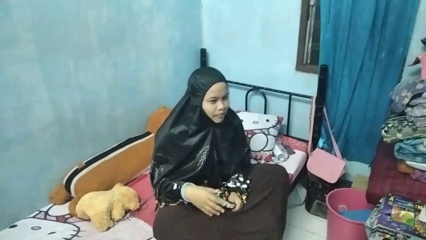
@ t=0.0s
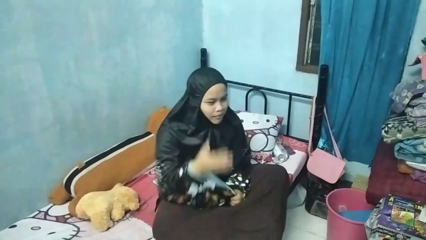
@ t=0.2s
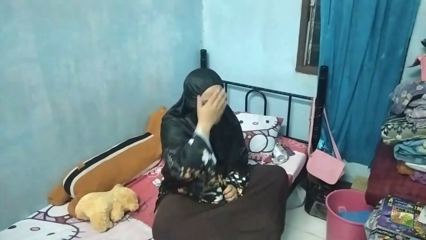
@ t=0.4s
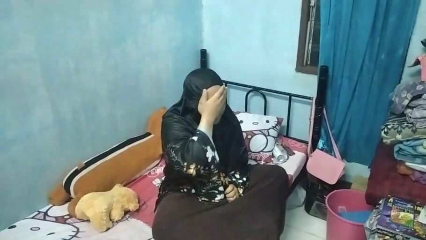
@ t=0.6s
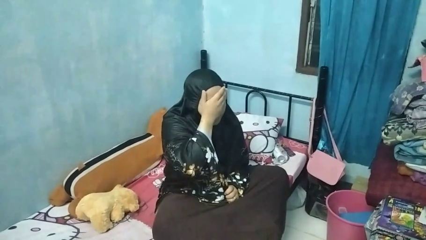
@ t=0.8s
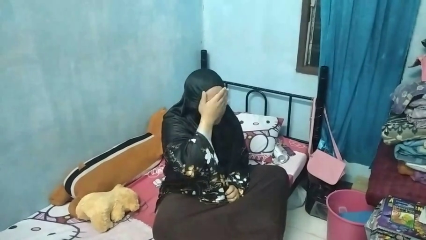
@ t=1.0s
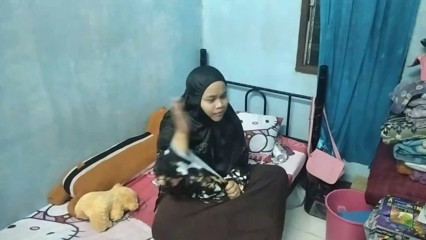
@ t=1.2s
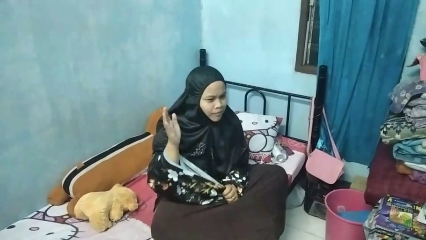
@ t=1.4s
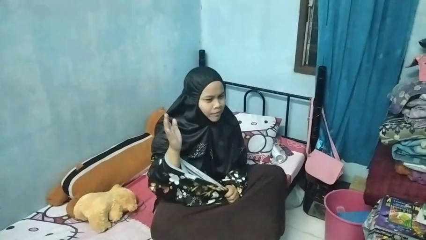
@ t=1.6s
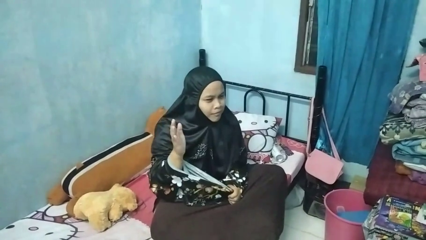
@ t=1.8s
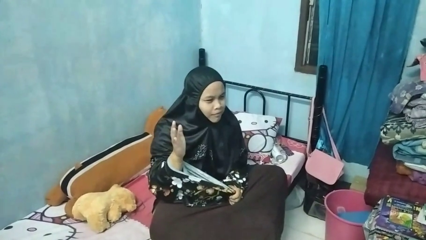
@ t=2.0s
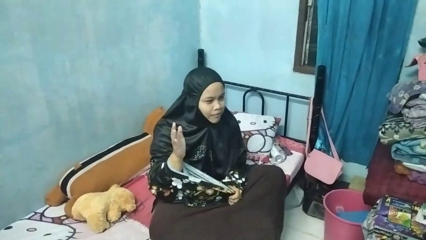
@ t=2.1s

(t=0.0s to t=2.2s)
person covers face with hands

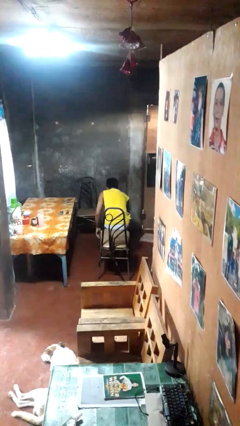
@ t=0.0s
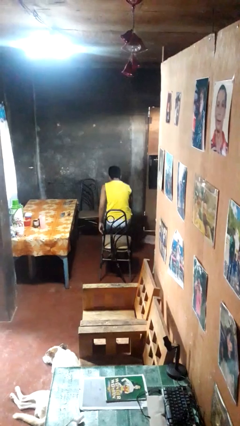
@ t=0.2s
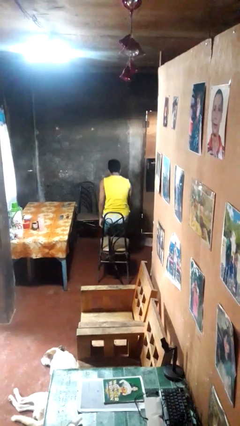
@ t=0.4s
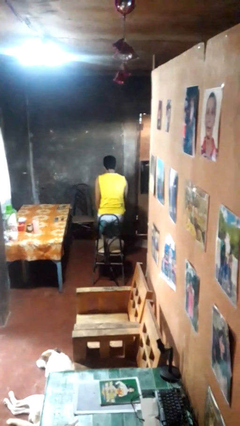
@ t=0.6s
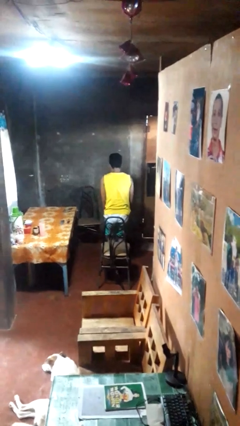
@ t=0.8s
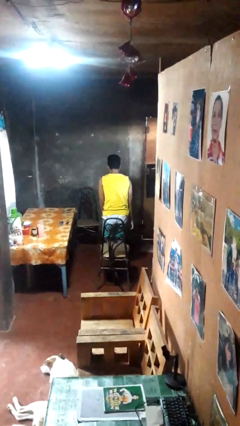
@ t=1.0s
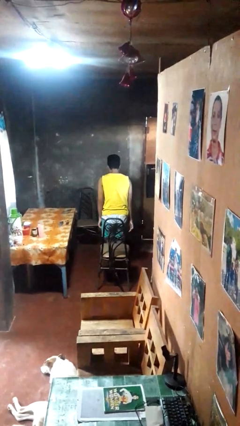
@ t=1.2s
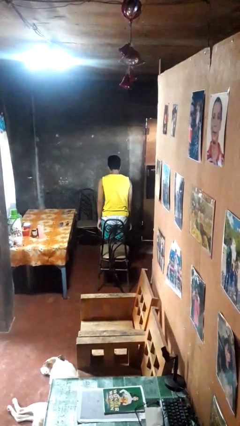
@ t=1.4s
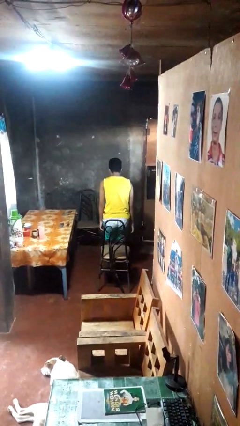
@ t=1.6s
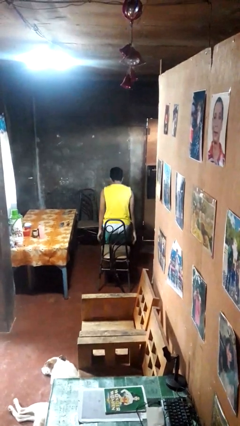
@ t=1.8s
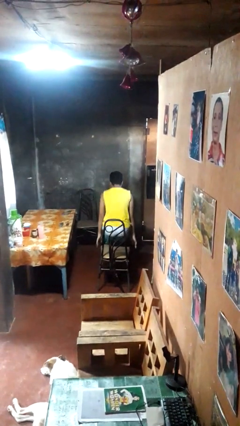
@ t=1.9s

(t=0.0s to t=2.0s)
person stands up from floor

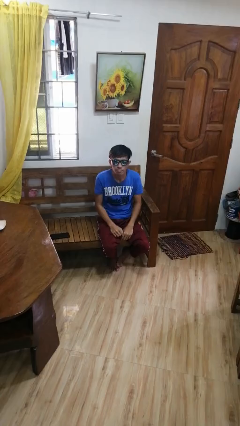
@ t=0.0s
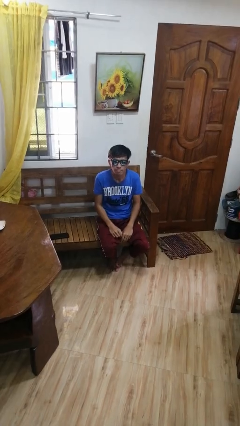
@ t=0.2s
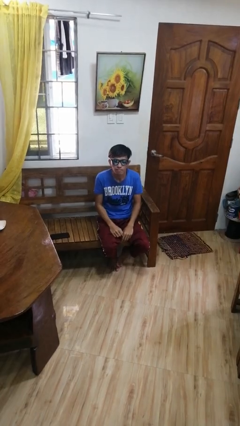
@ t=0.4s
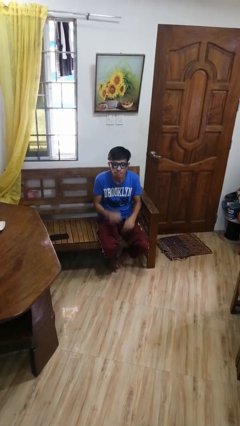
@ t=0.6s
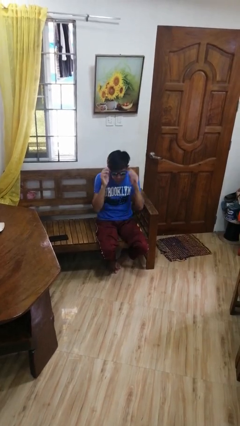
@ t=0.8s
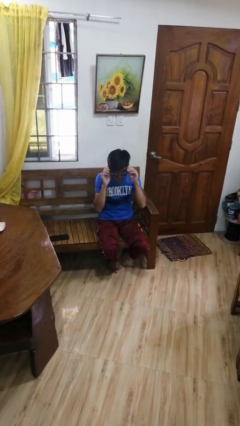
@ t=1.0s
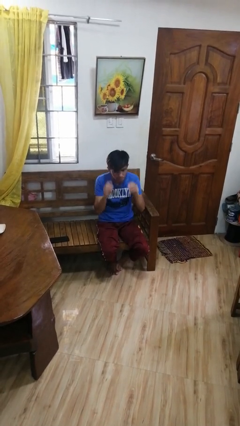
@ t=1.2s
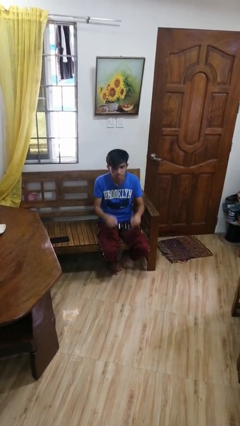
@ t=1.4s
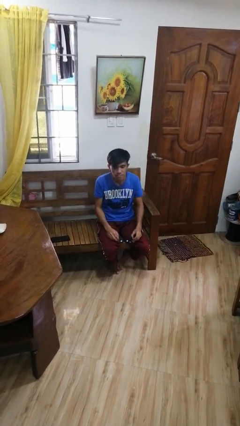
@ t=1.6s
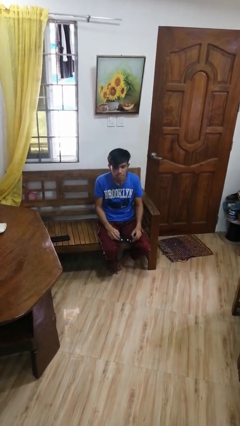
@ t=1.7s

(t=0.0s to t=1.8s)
person takes off sunglasses

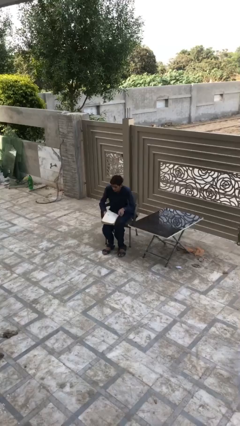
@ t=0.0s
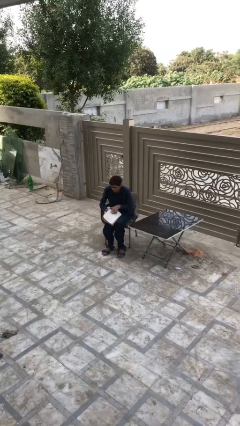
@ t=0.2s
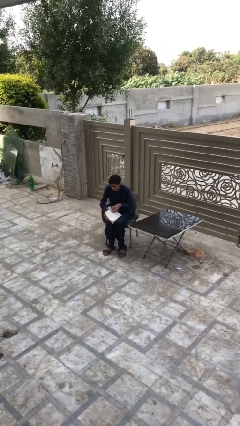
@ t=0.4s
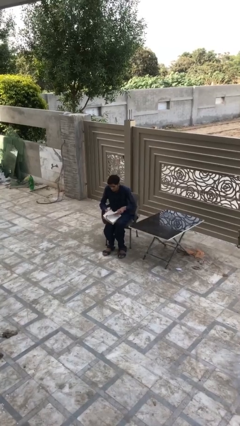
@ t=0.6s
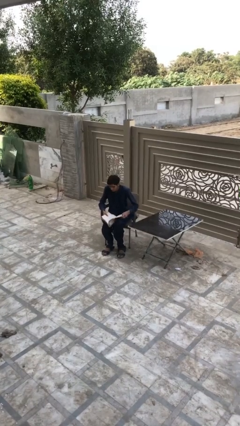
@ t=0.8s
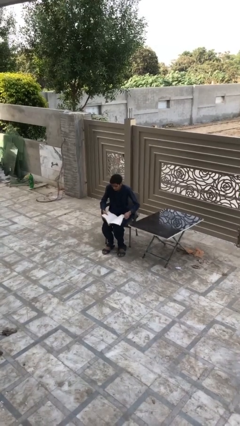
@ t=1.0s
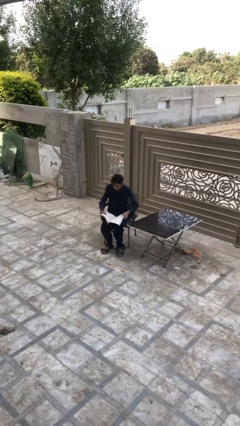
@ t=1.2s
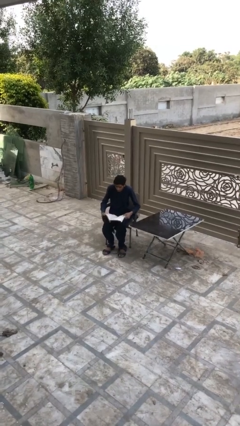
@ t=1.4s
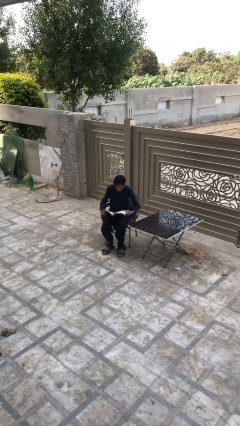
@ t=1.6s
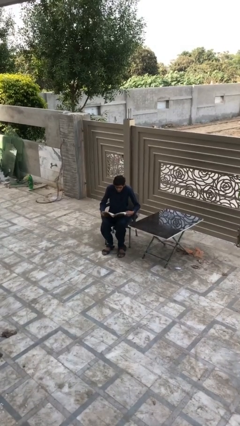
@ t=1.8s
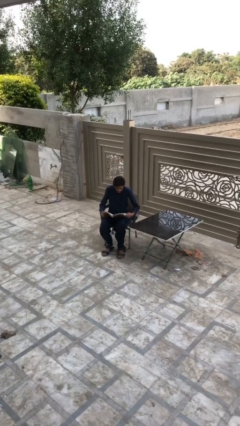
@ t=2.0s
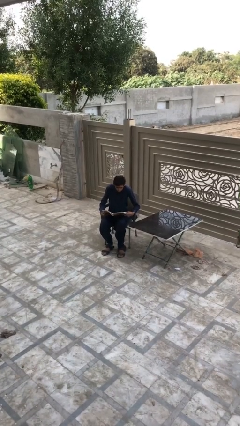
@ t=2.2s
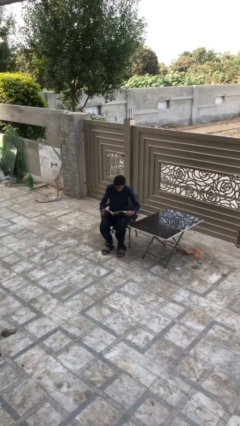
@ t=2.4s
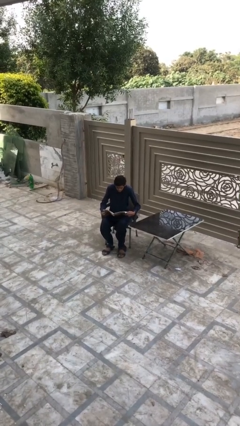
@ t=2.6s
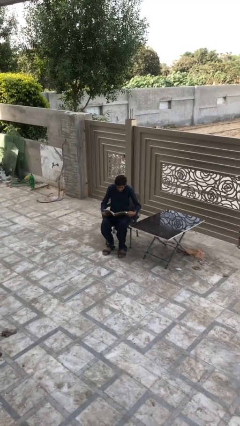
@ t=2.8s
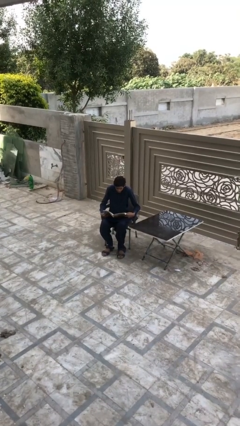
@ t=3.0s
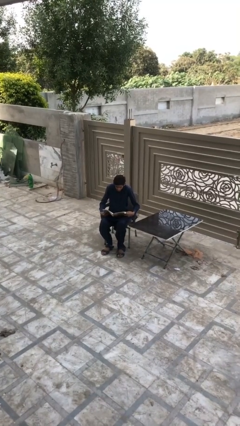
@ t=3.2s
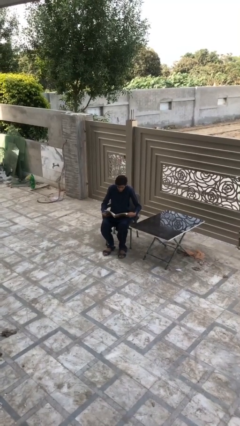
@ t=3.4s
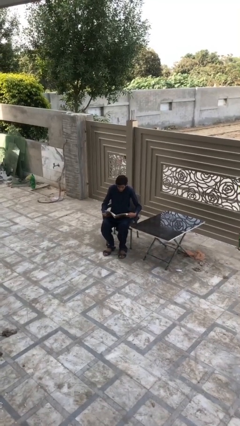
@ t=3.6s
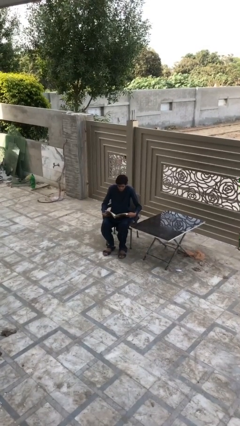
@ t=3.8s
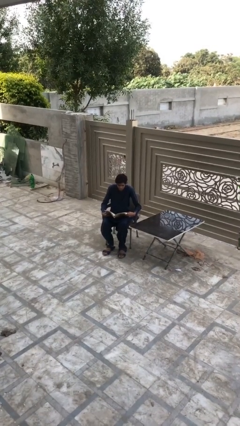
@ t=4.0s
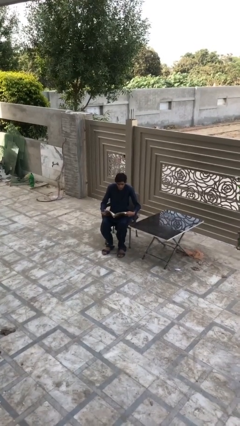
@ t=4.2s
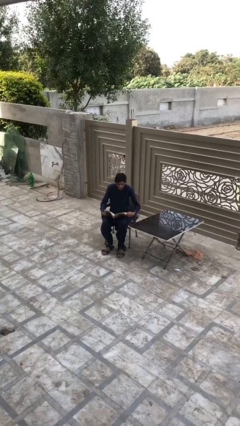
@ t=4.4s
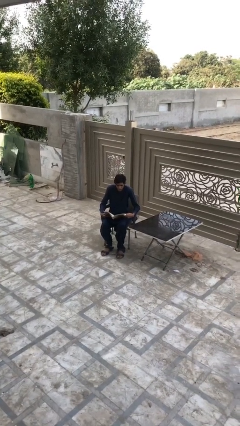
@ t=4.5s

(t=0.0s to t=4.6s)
person reads document

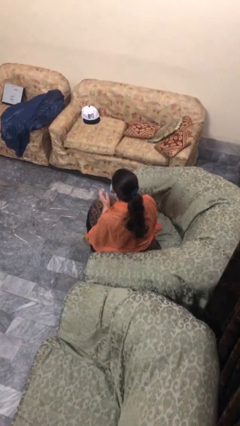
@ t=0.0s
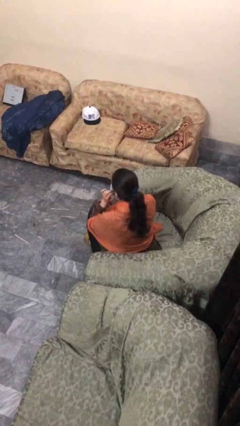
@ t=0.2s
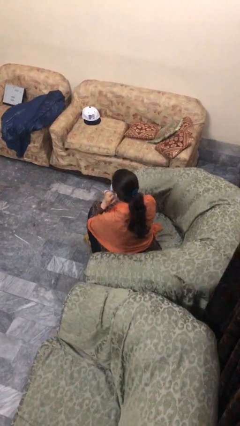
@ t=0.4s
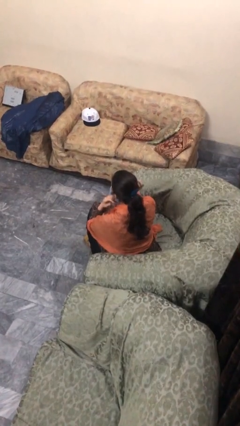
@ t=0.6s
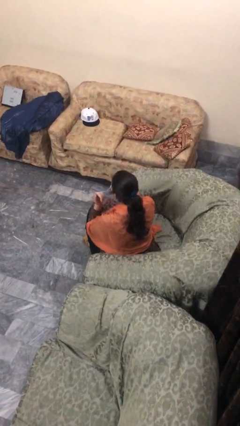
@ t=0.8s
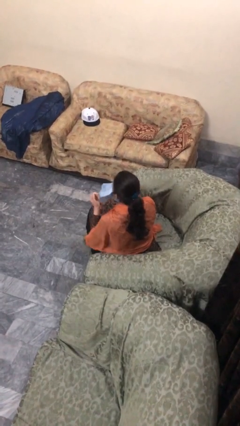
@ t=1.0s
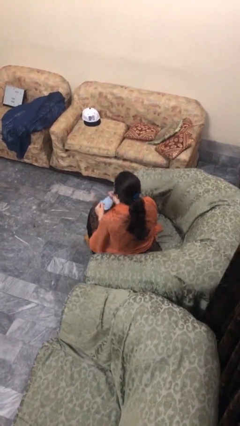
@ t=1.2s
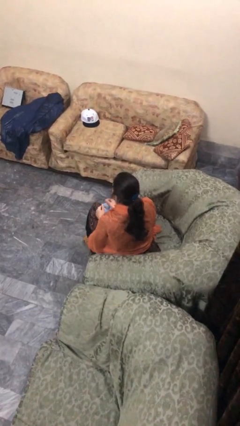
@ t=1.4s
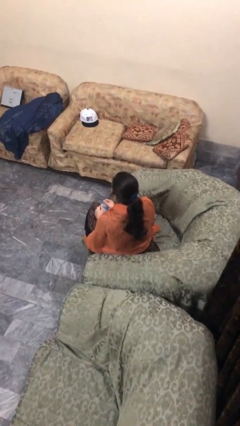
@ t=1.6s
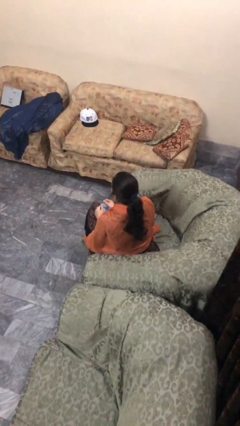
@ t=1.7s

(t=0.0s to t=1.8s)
person takes off facemask

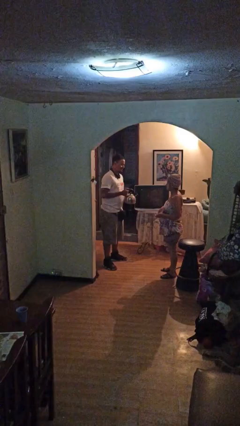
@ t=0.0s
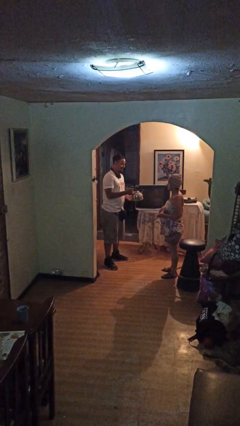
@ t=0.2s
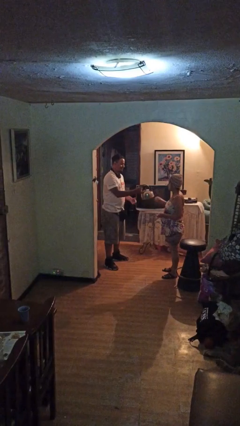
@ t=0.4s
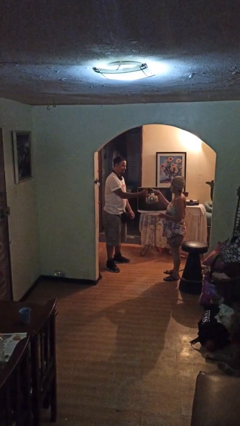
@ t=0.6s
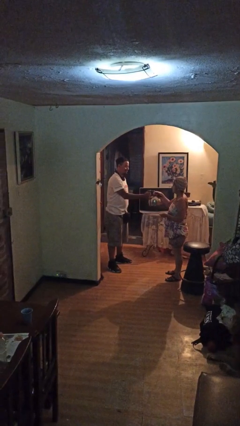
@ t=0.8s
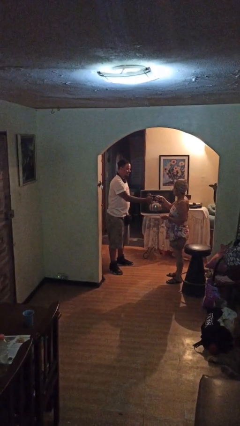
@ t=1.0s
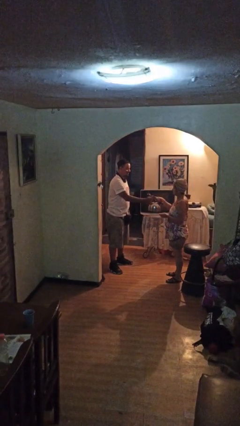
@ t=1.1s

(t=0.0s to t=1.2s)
person transfers object to person

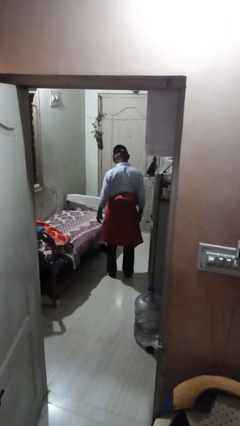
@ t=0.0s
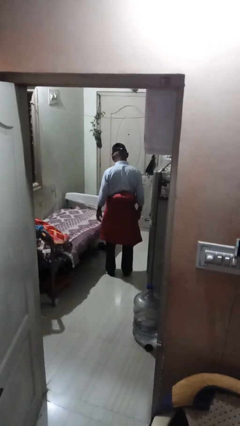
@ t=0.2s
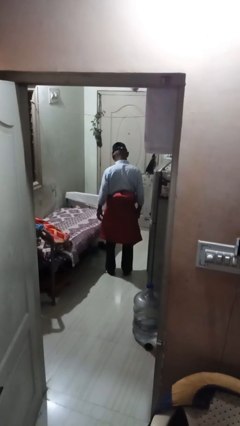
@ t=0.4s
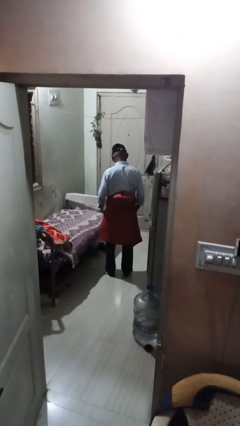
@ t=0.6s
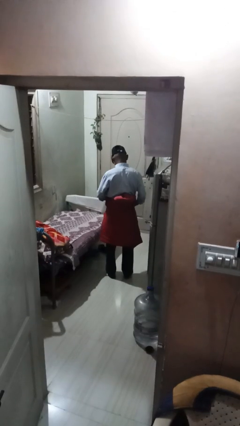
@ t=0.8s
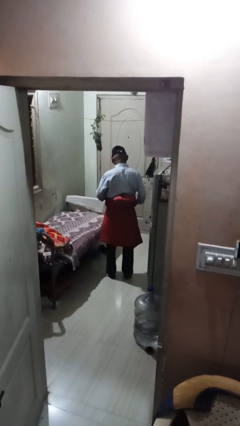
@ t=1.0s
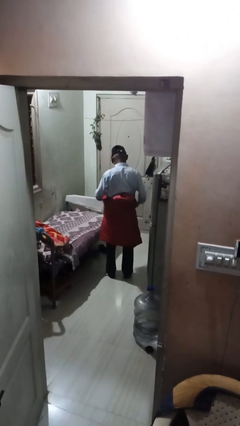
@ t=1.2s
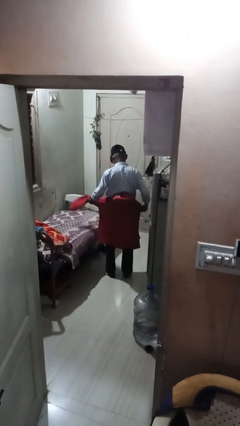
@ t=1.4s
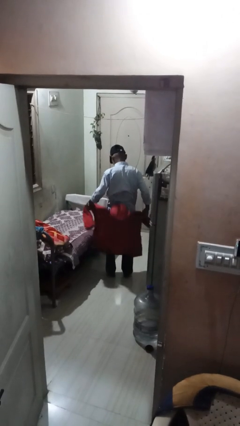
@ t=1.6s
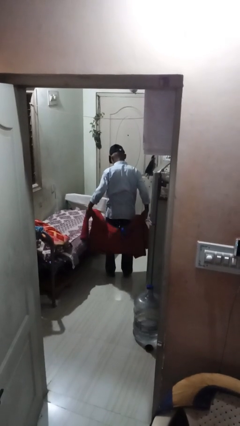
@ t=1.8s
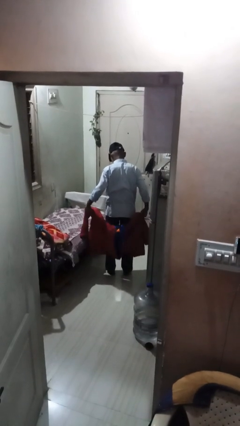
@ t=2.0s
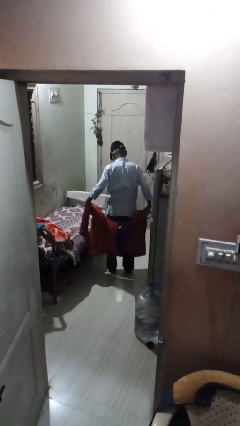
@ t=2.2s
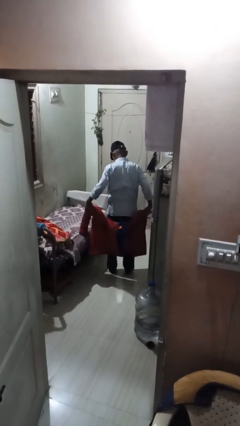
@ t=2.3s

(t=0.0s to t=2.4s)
person unties jacket around waist

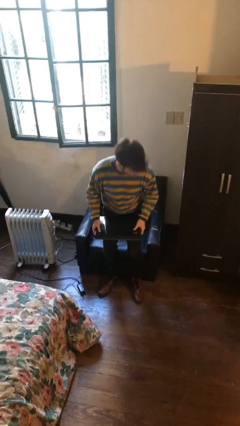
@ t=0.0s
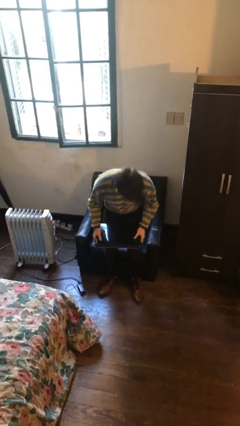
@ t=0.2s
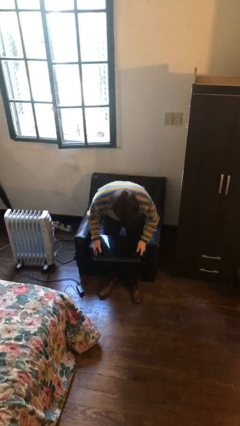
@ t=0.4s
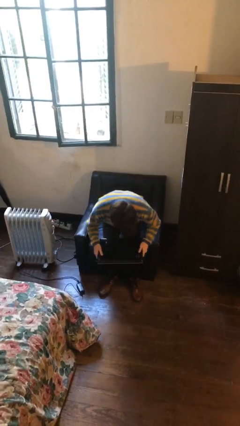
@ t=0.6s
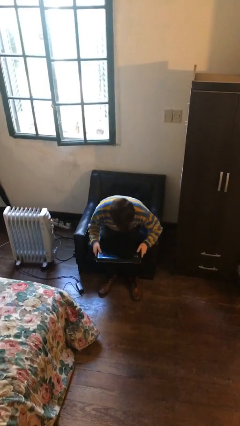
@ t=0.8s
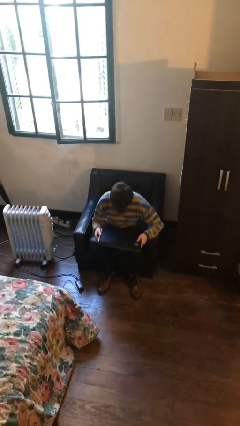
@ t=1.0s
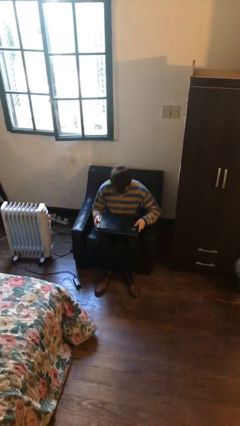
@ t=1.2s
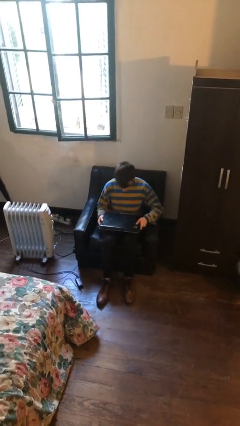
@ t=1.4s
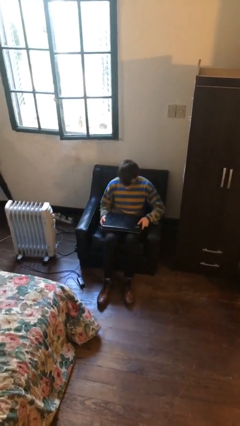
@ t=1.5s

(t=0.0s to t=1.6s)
person sits down
